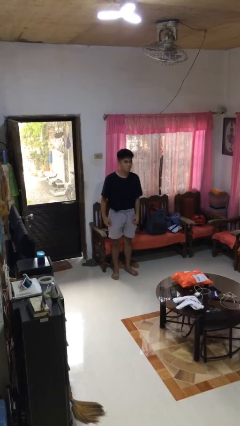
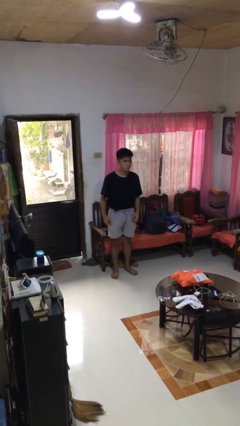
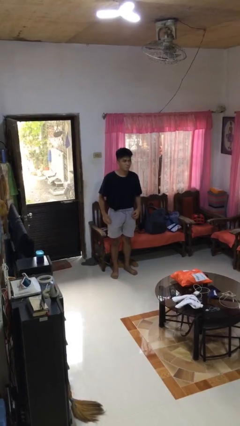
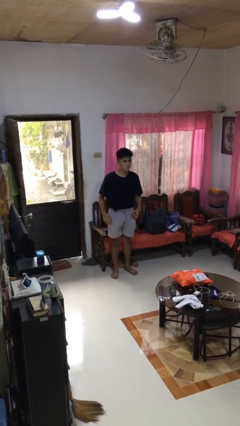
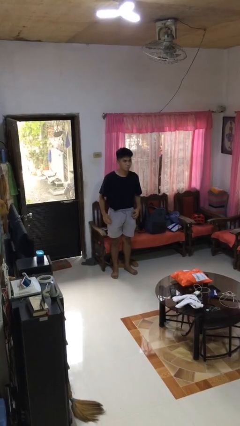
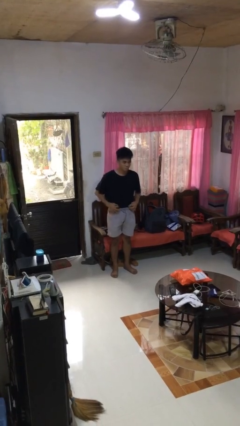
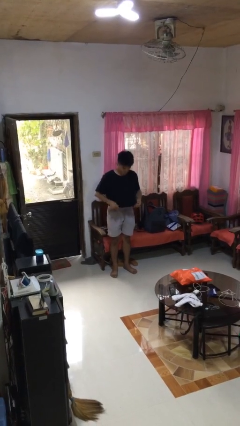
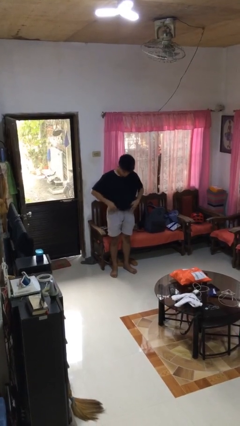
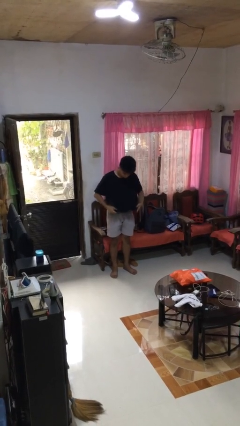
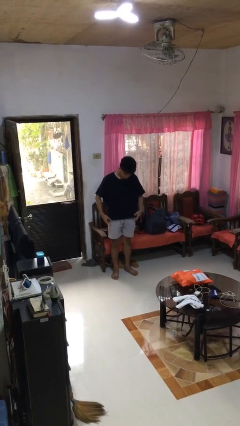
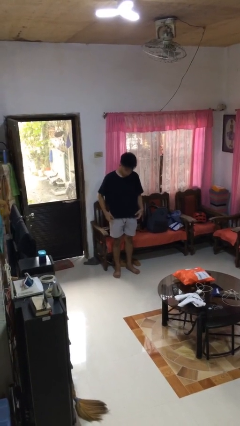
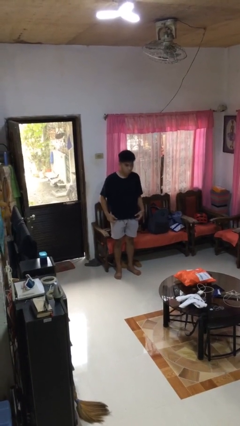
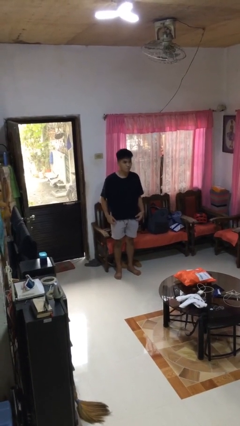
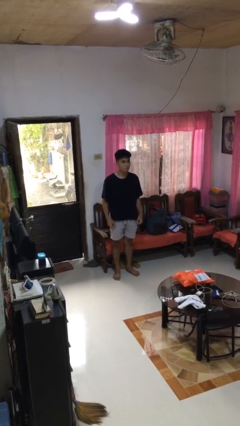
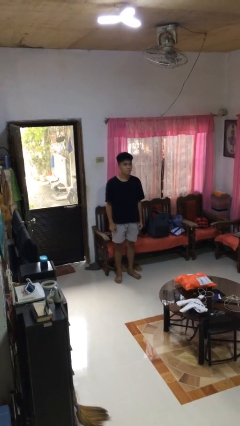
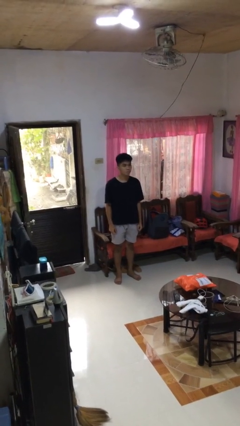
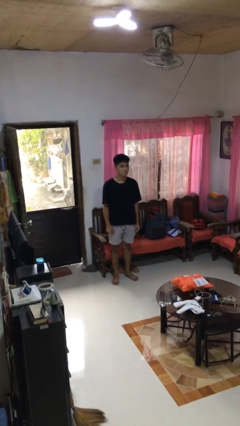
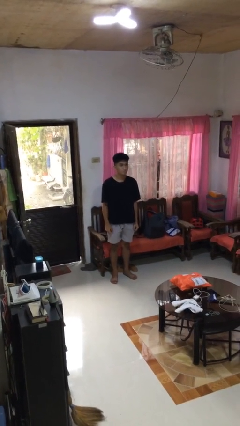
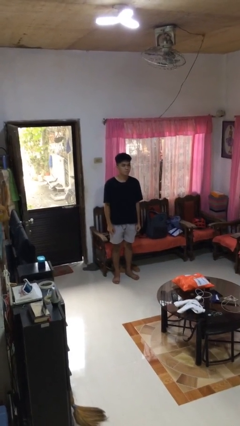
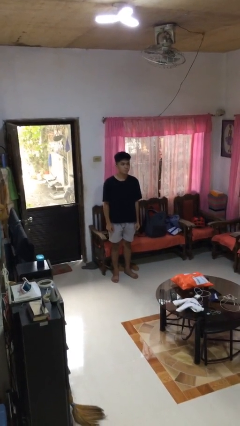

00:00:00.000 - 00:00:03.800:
person untucks shirt

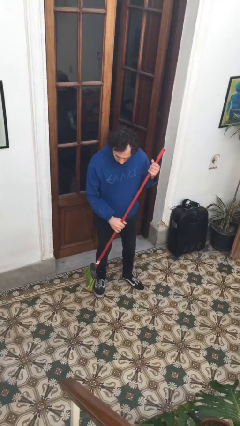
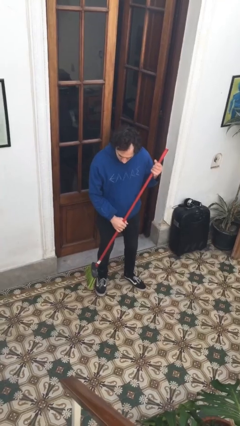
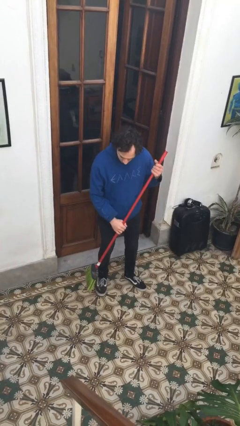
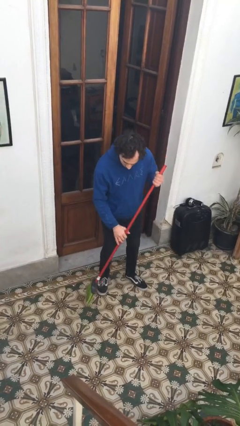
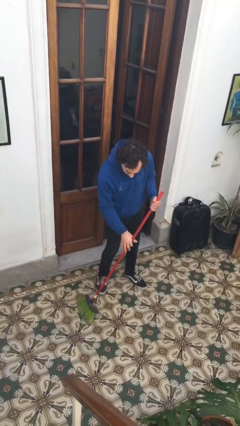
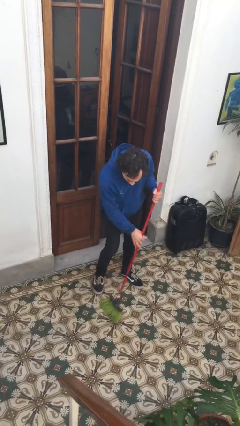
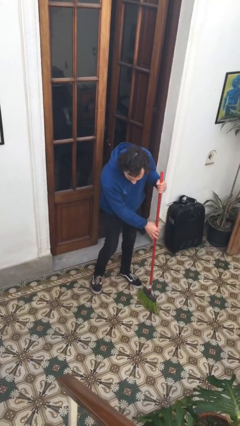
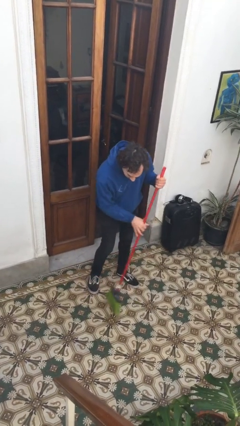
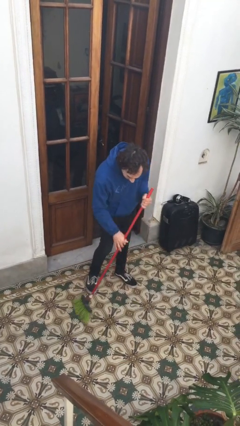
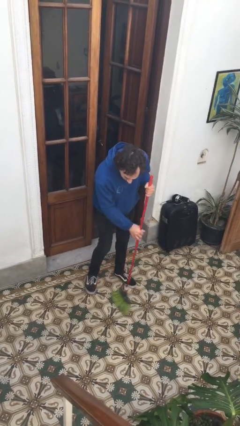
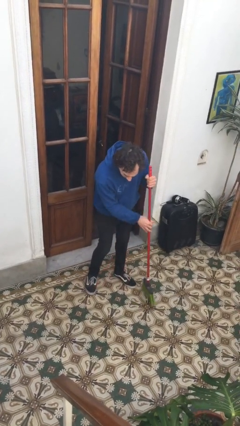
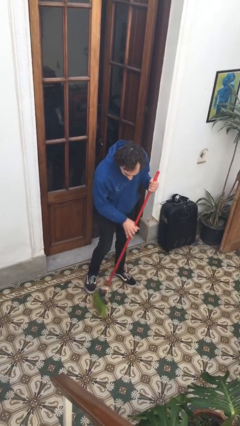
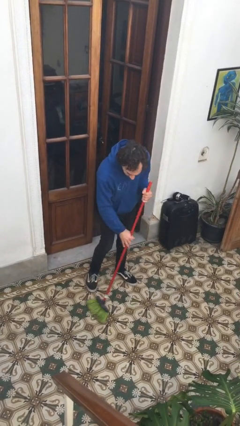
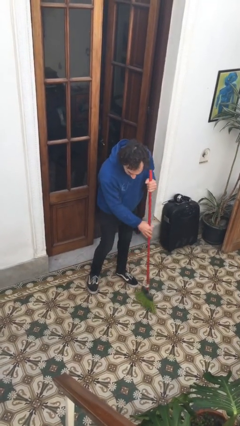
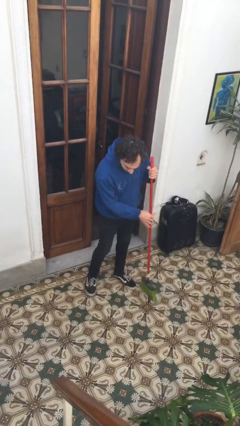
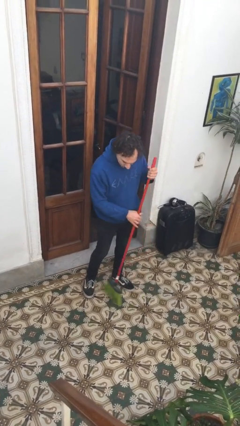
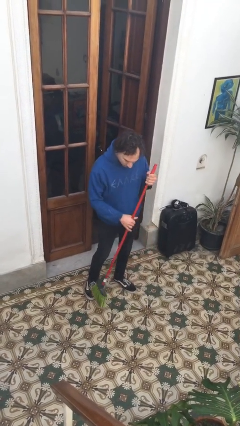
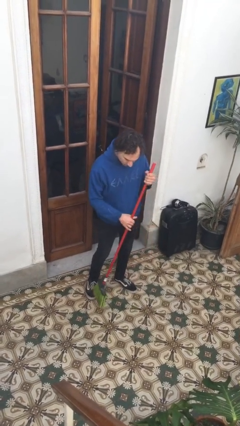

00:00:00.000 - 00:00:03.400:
person sweeps floor

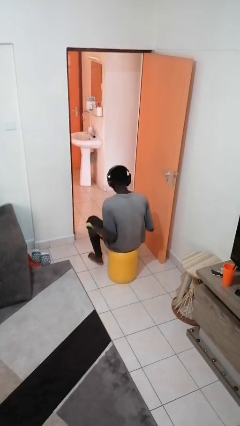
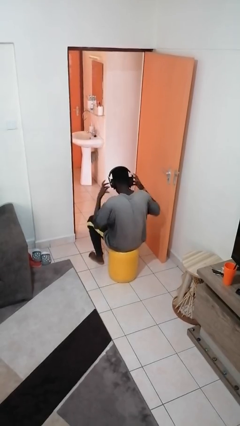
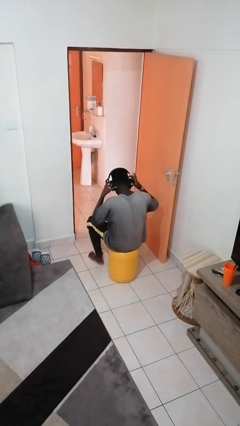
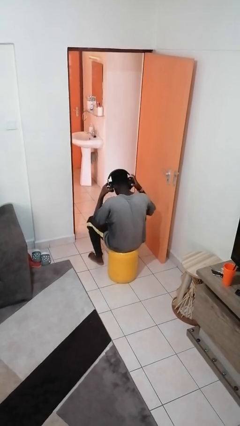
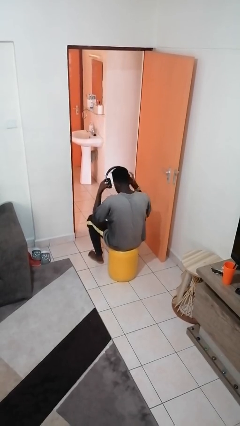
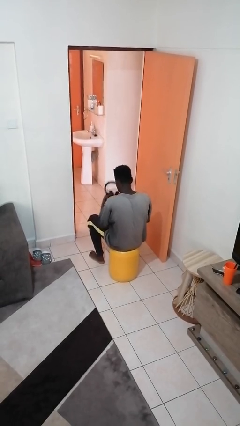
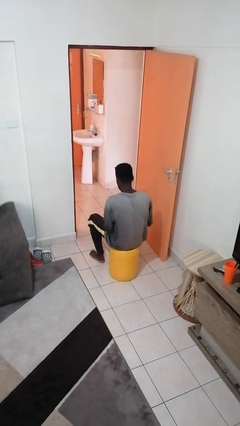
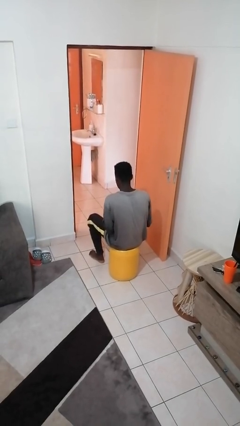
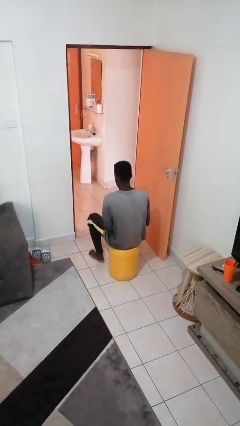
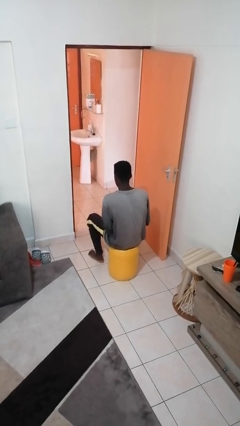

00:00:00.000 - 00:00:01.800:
person takes off headphones

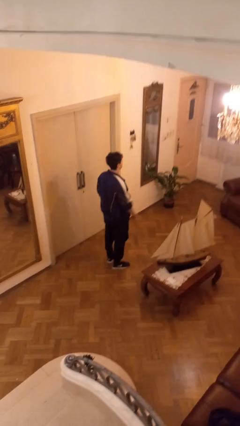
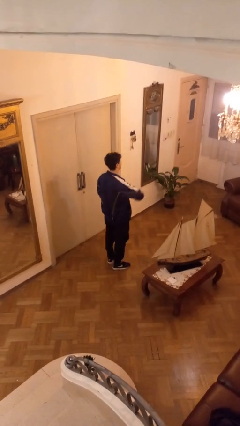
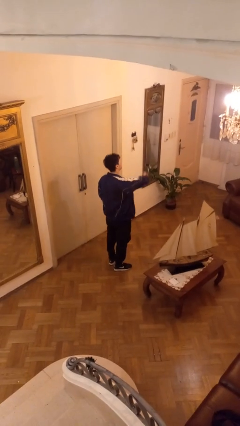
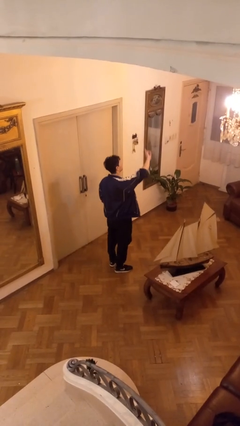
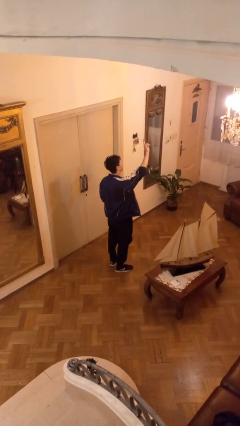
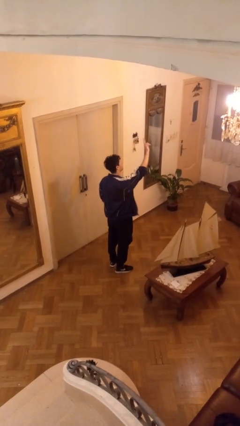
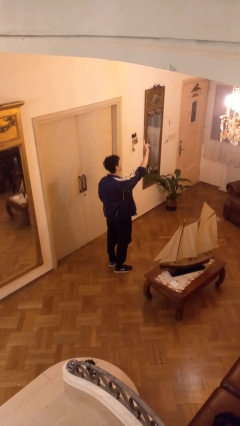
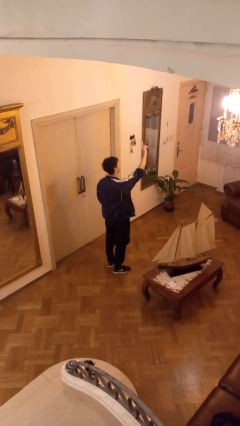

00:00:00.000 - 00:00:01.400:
person gestures swipe up

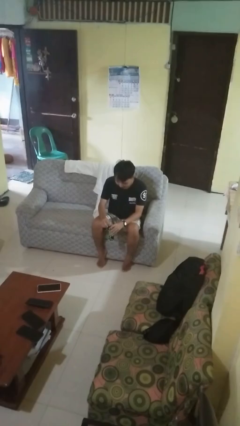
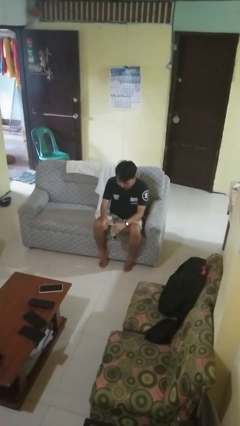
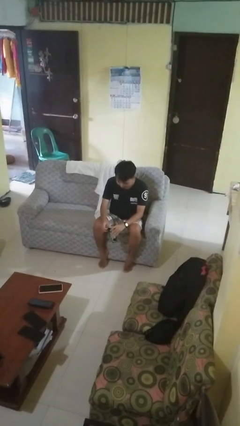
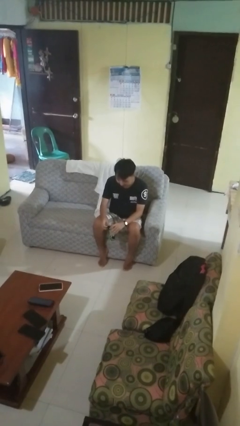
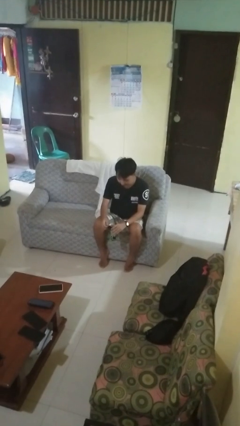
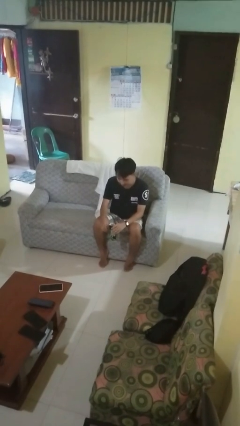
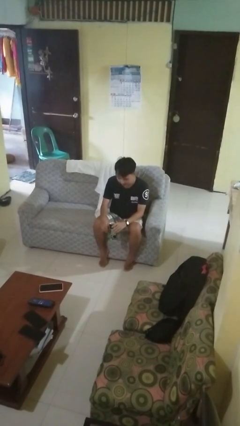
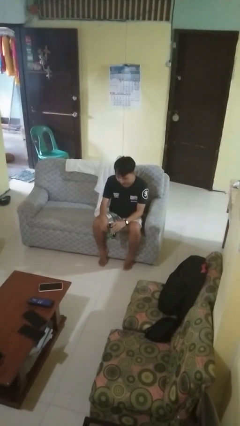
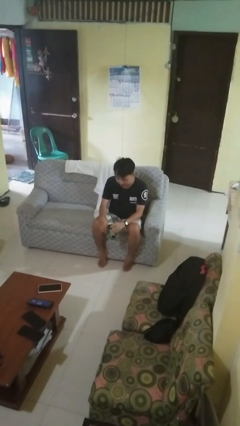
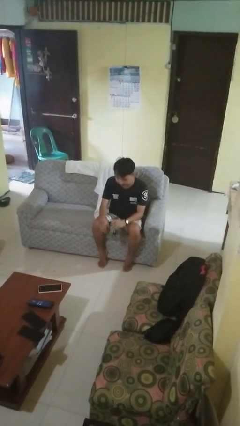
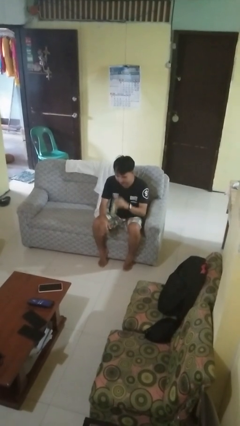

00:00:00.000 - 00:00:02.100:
person opens beverage can

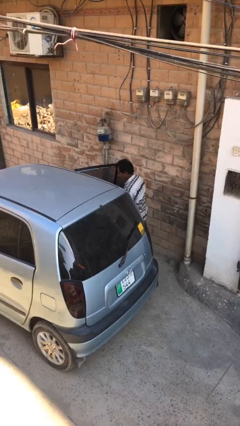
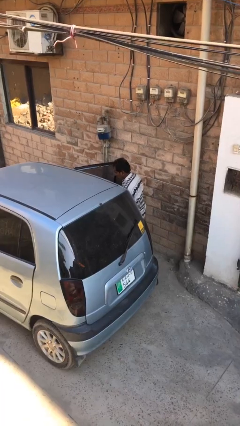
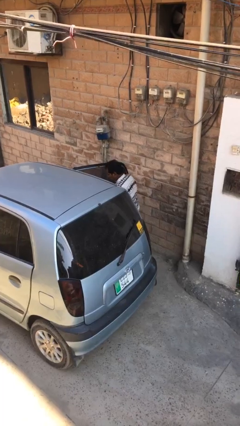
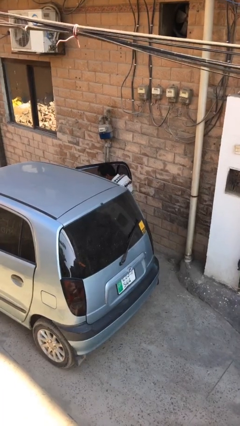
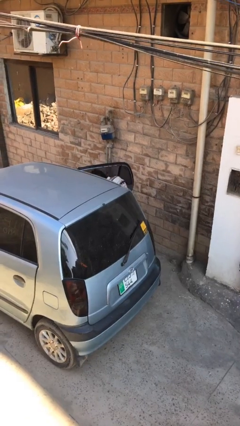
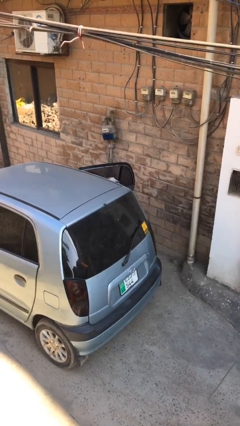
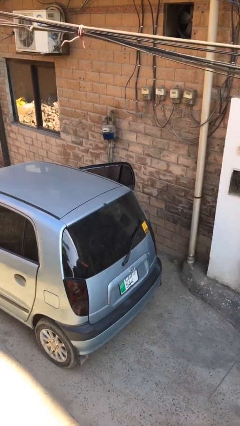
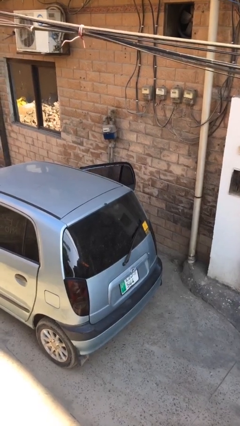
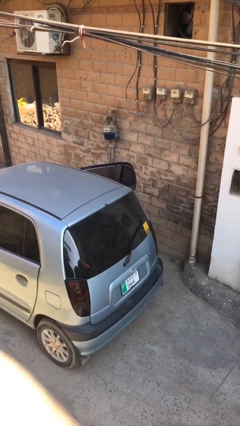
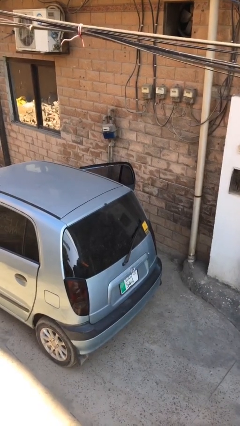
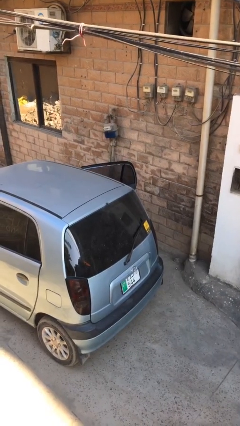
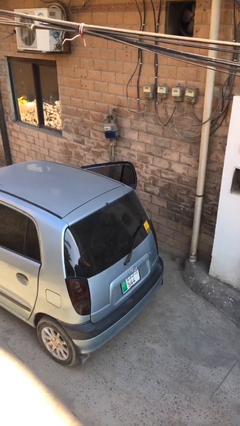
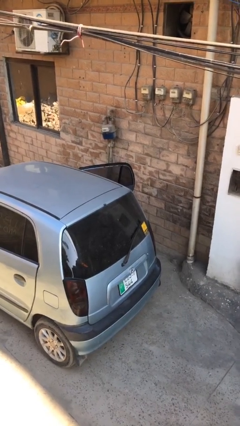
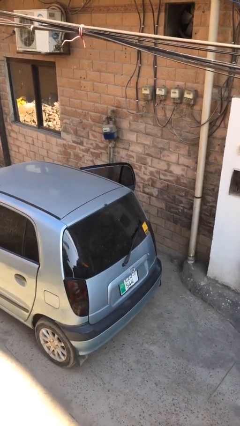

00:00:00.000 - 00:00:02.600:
person enters car

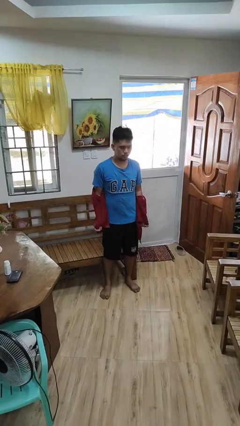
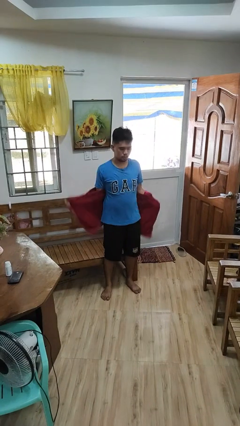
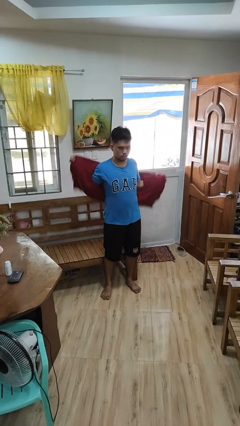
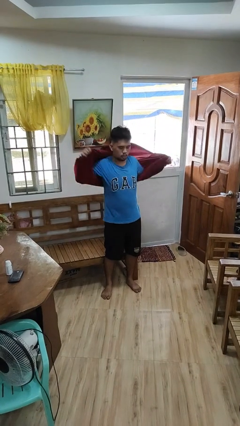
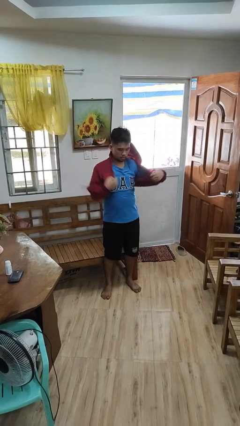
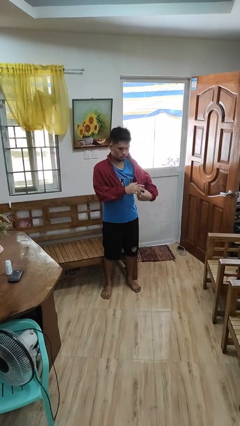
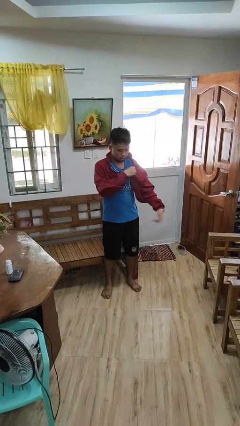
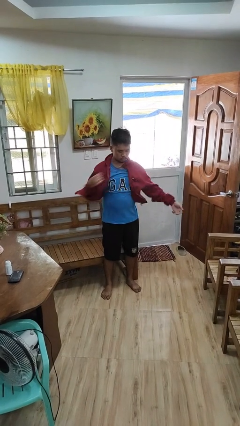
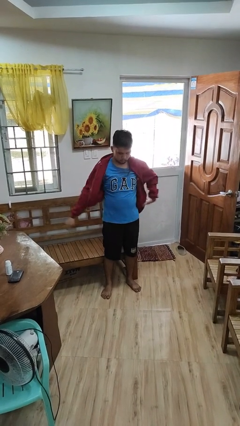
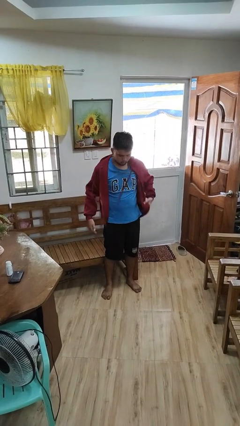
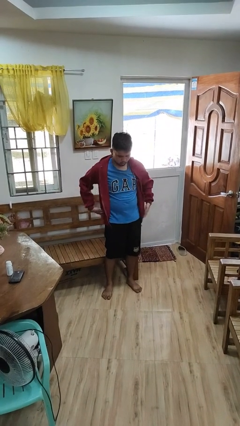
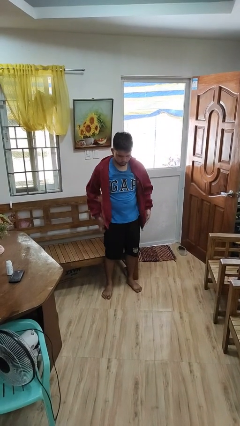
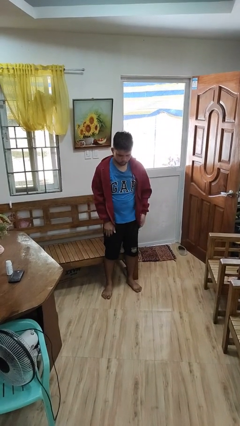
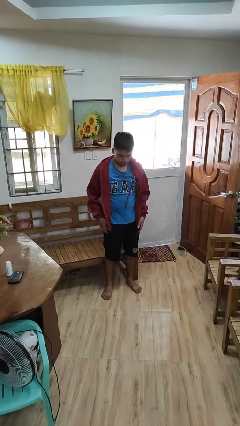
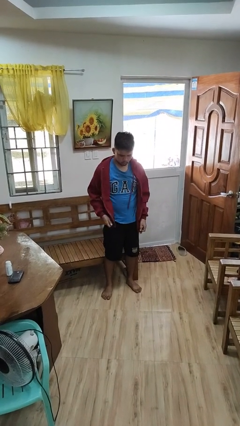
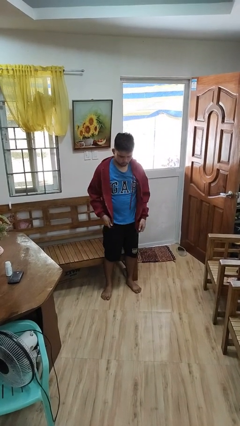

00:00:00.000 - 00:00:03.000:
person puts on jacket
